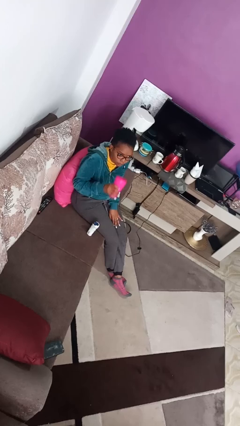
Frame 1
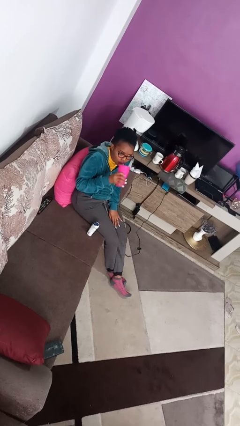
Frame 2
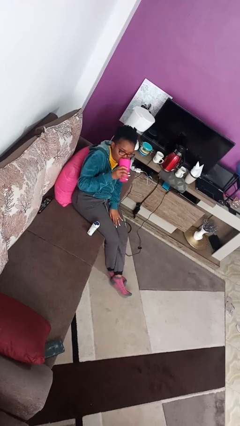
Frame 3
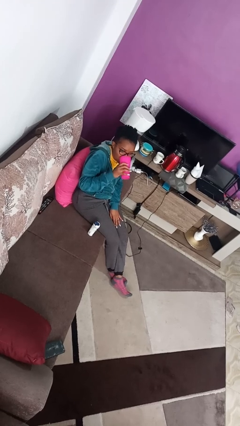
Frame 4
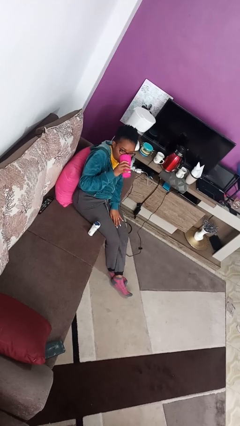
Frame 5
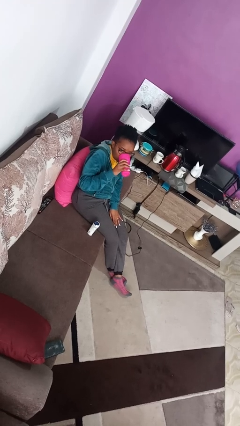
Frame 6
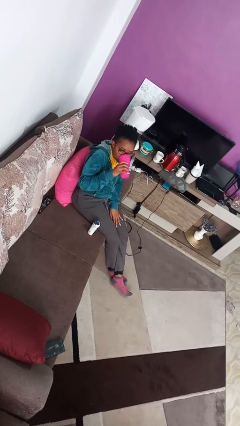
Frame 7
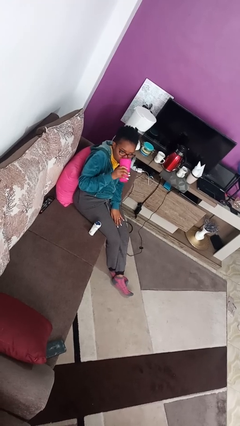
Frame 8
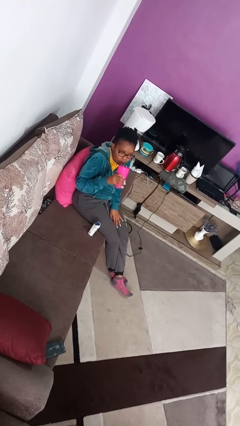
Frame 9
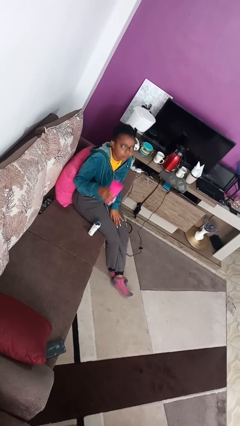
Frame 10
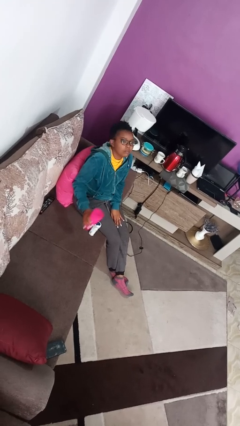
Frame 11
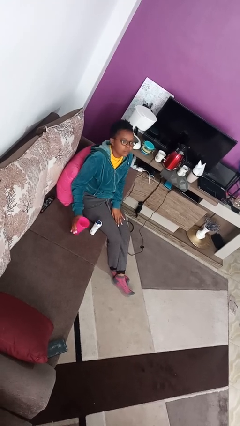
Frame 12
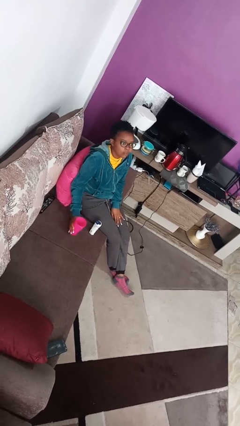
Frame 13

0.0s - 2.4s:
person drinks from cup

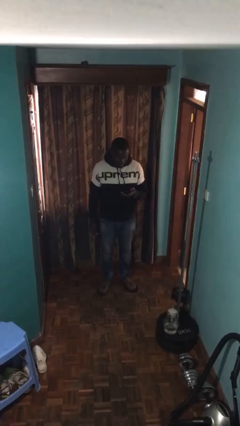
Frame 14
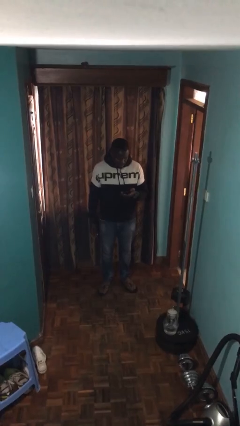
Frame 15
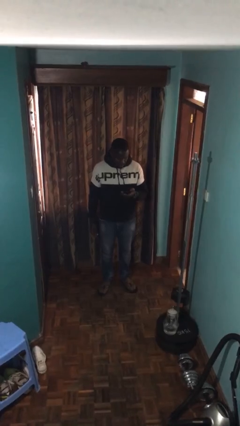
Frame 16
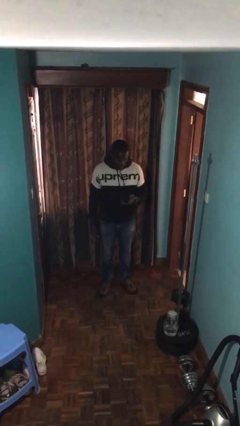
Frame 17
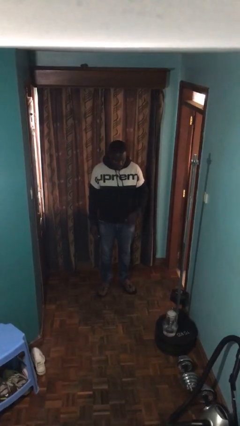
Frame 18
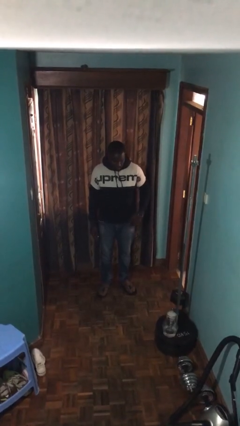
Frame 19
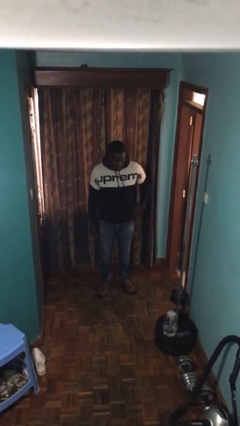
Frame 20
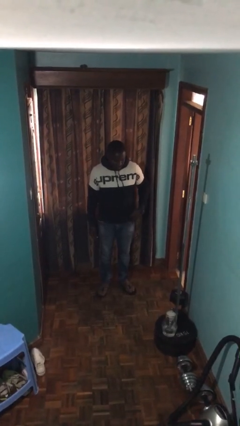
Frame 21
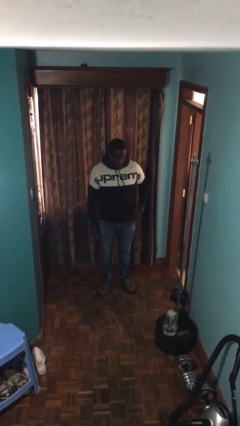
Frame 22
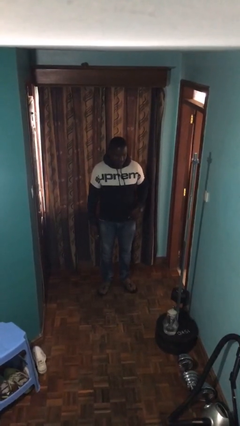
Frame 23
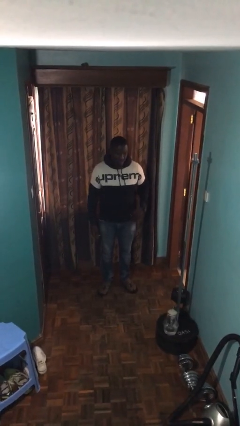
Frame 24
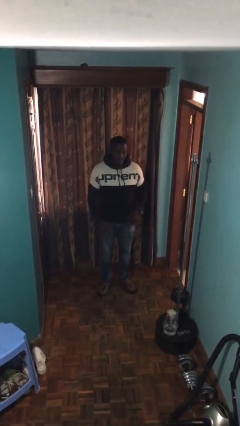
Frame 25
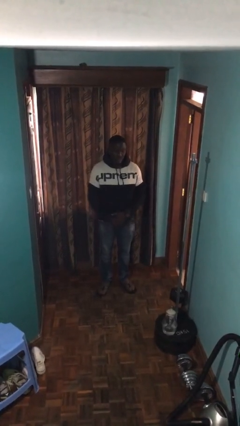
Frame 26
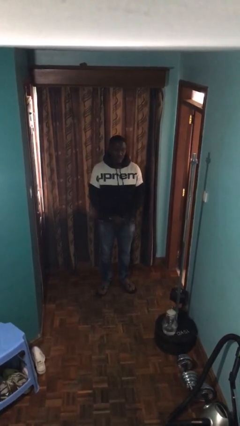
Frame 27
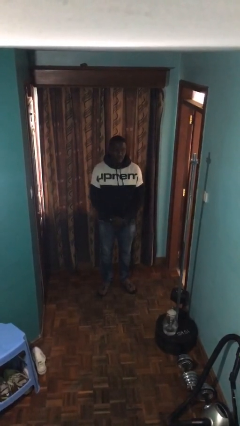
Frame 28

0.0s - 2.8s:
person puts phone into pocket

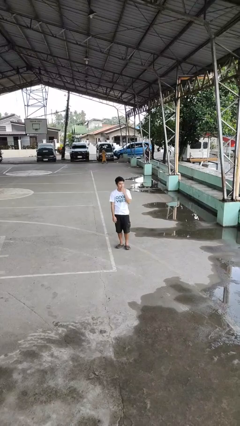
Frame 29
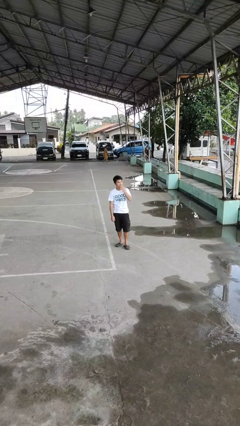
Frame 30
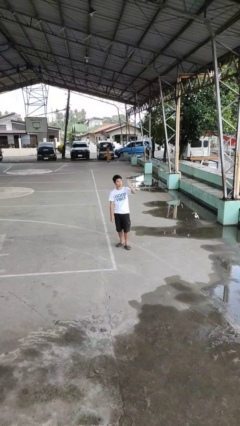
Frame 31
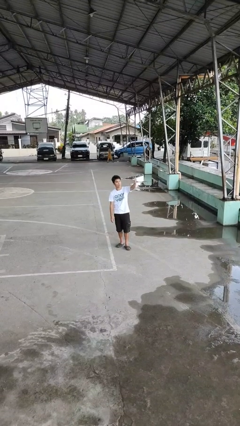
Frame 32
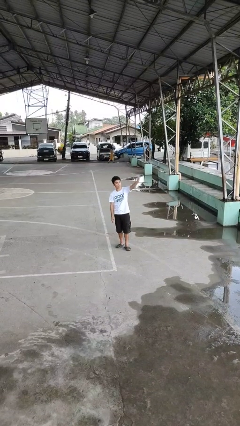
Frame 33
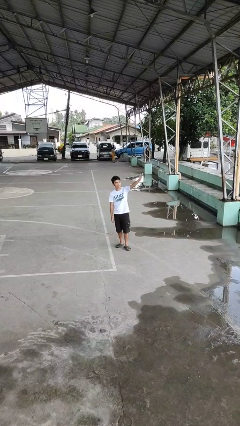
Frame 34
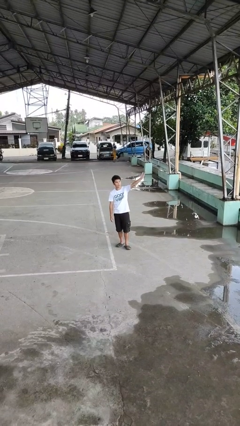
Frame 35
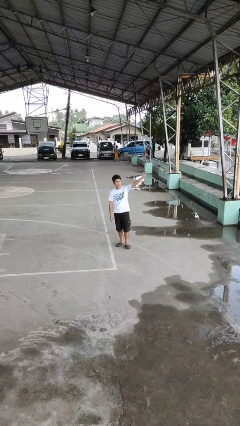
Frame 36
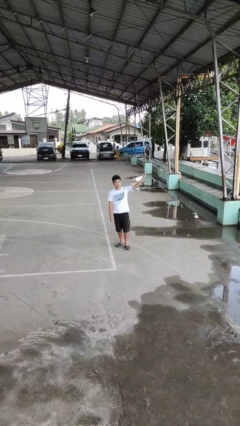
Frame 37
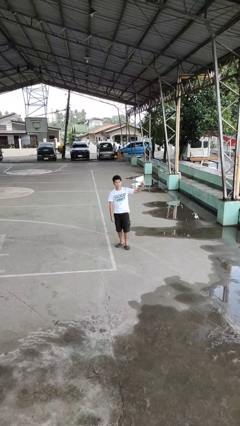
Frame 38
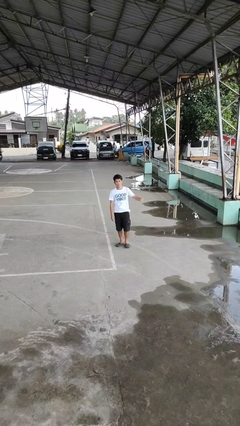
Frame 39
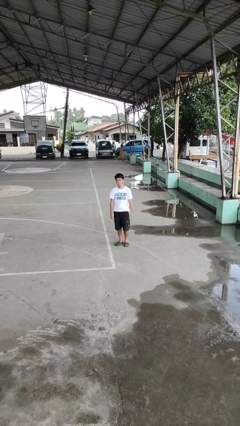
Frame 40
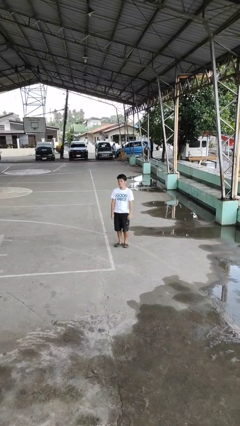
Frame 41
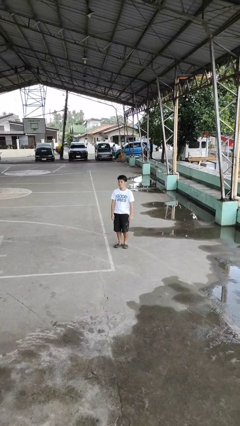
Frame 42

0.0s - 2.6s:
person gestures blow kiss

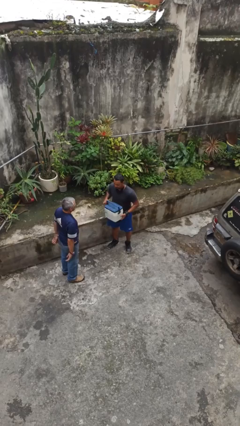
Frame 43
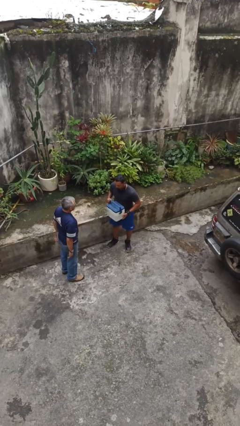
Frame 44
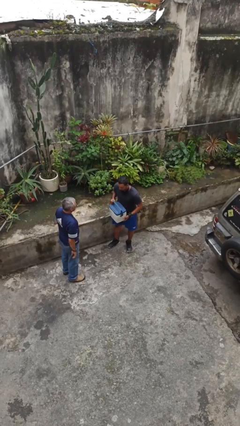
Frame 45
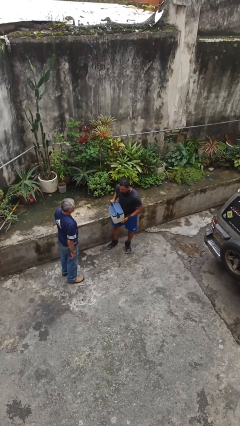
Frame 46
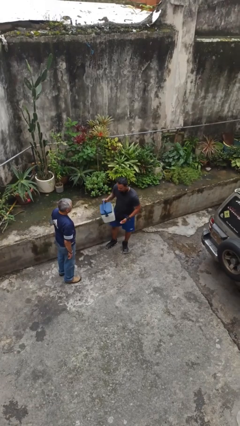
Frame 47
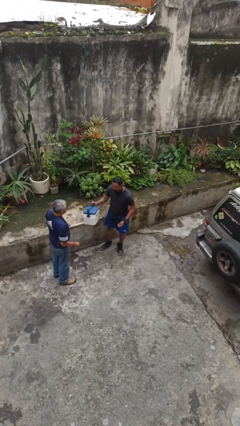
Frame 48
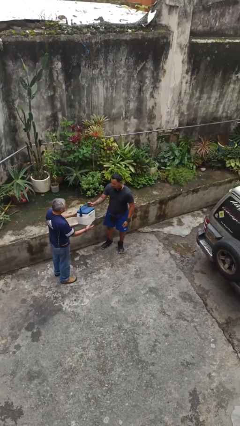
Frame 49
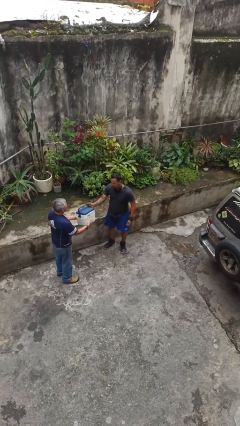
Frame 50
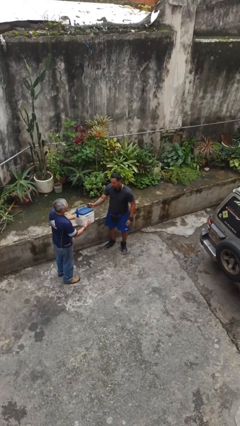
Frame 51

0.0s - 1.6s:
person transfers object to person

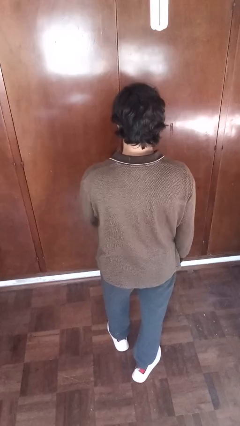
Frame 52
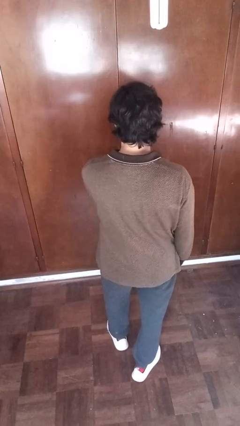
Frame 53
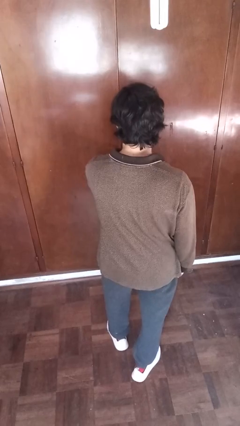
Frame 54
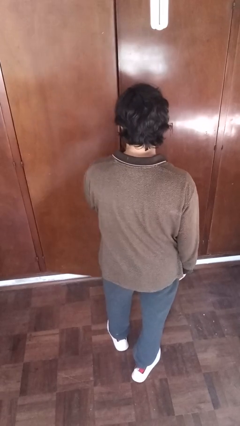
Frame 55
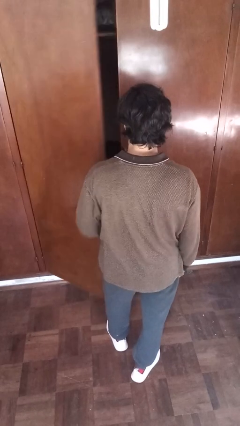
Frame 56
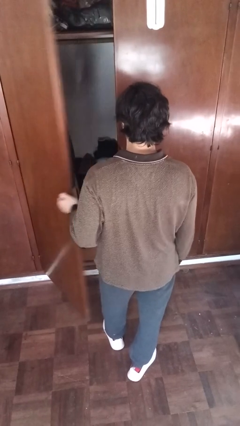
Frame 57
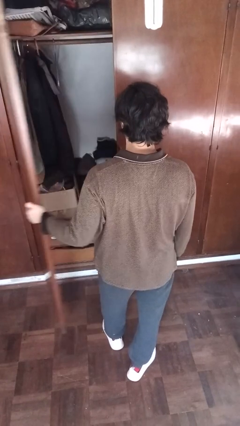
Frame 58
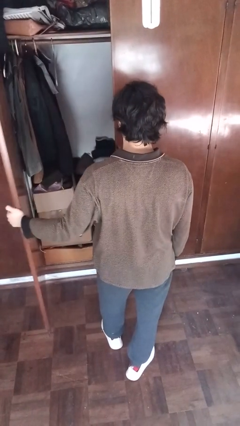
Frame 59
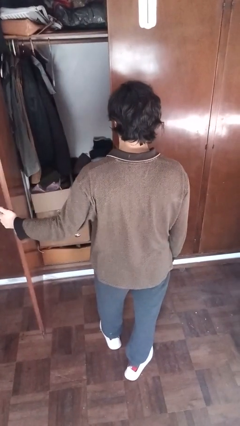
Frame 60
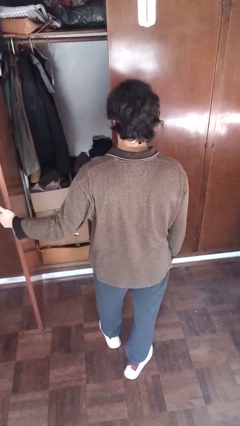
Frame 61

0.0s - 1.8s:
person opens closet door

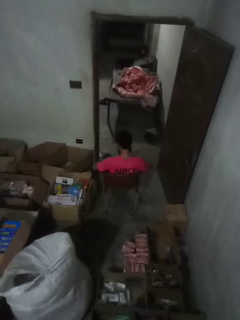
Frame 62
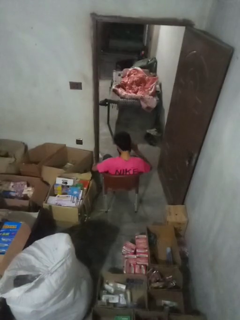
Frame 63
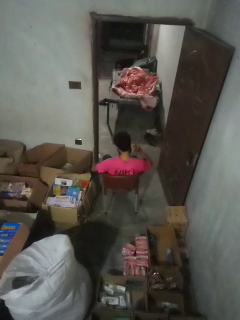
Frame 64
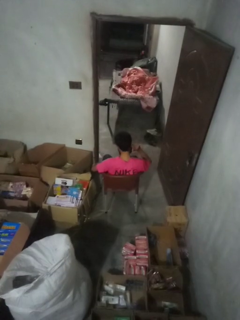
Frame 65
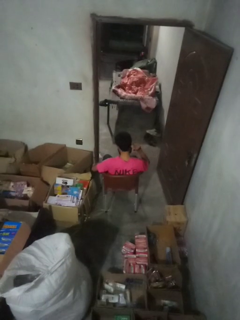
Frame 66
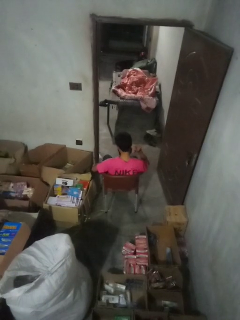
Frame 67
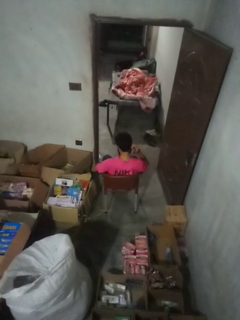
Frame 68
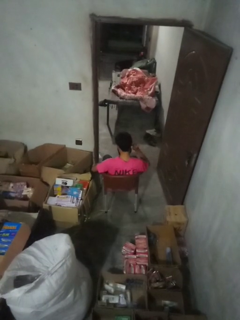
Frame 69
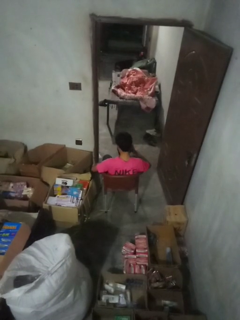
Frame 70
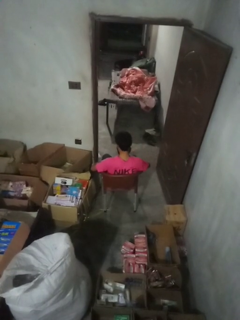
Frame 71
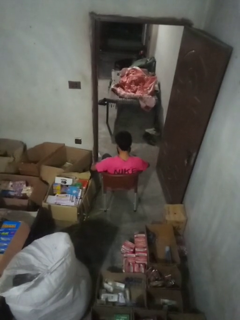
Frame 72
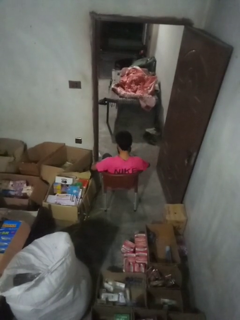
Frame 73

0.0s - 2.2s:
person touches earlobe

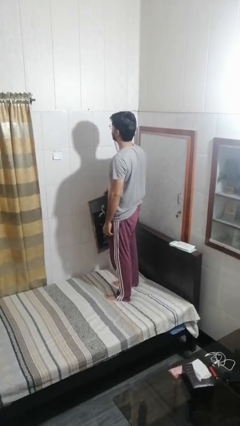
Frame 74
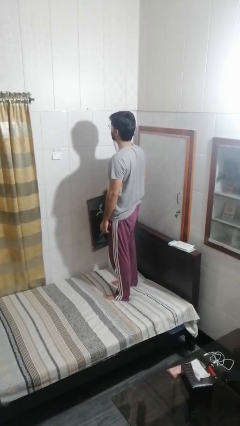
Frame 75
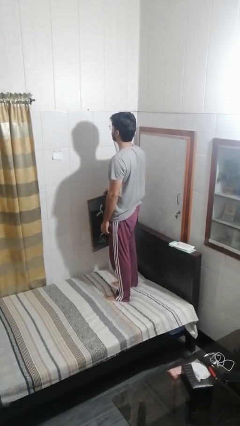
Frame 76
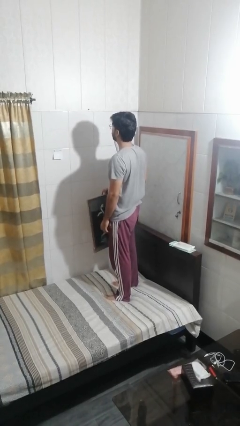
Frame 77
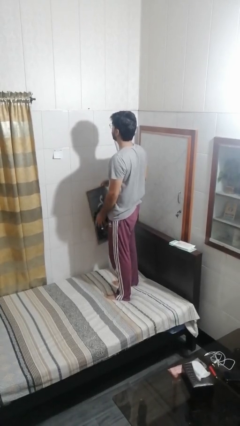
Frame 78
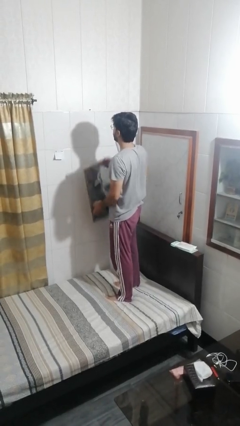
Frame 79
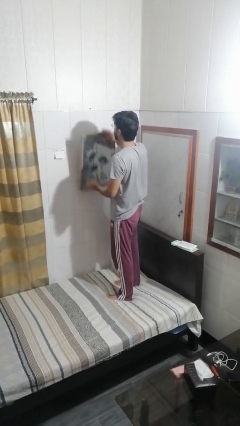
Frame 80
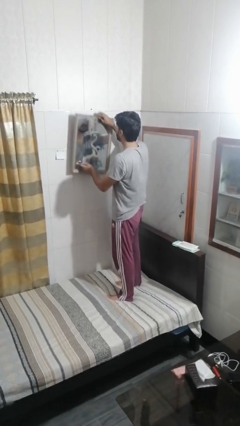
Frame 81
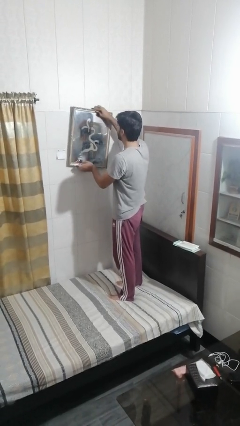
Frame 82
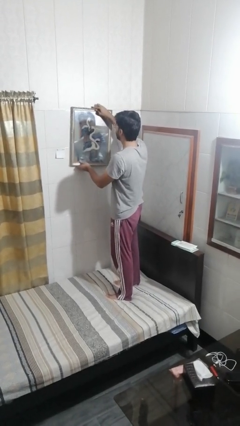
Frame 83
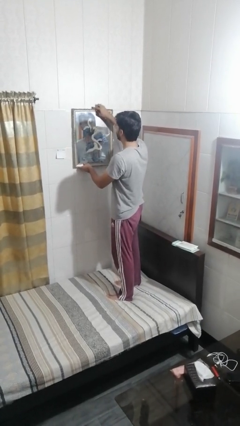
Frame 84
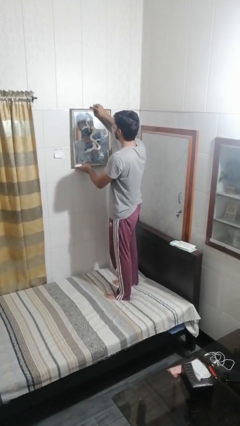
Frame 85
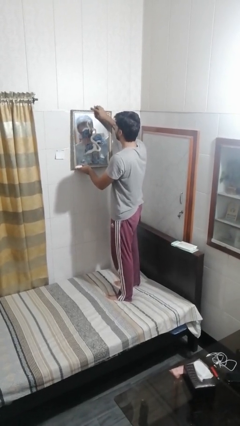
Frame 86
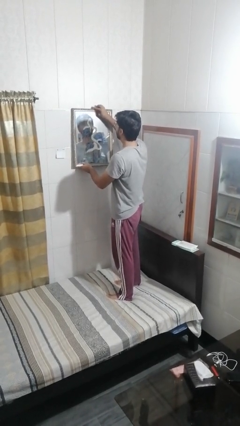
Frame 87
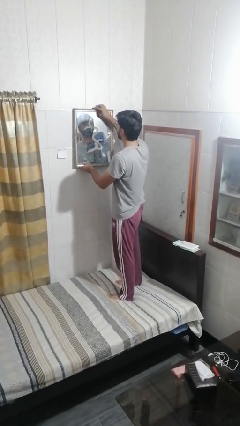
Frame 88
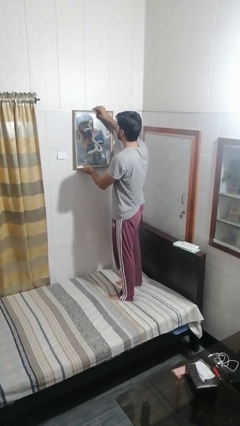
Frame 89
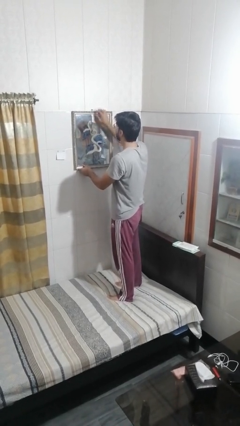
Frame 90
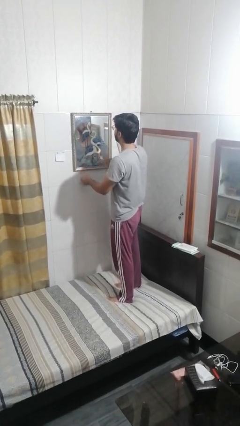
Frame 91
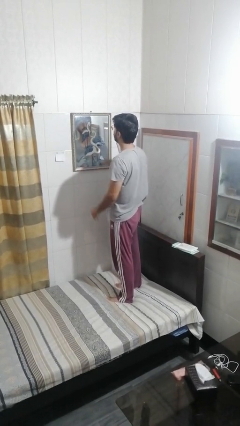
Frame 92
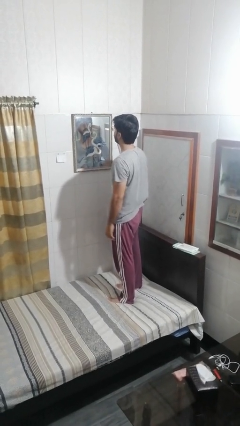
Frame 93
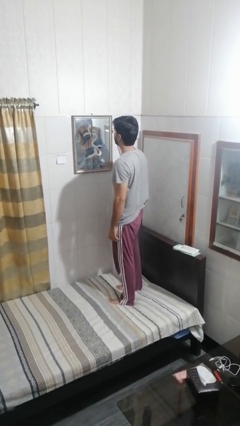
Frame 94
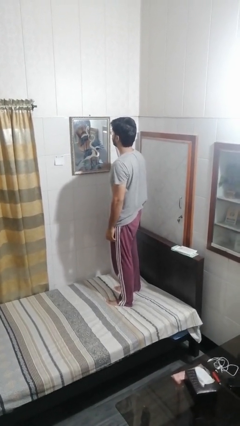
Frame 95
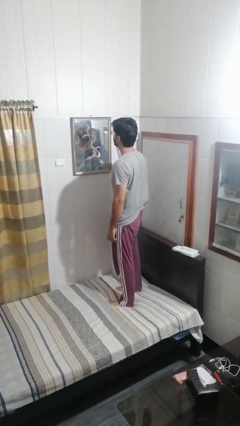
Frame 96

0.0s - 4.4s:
person puts up picture frame

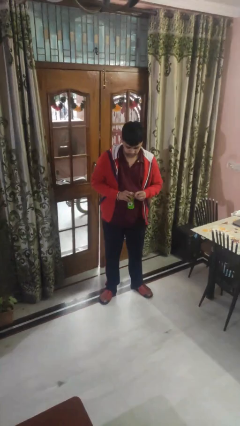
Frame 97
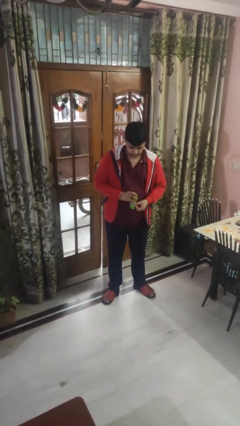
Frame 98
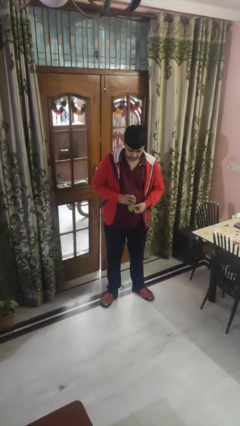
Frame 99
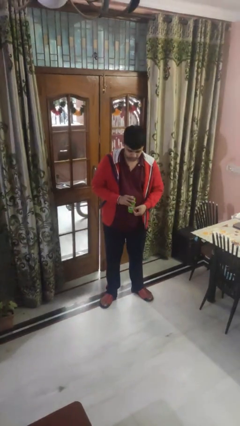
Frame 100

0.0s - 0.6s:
person opens beverage can
